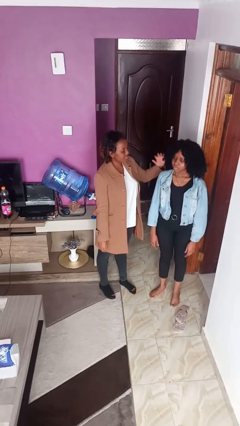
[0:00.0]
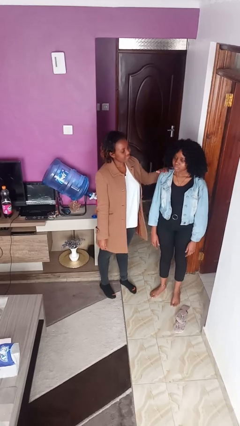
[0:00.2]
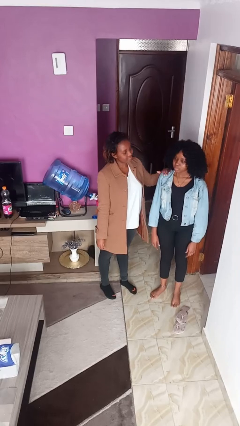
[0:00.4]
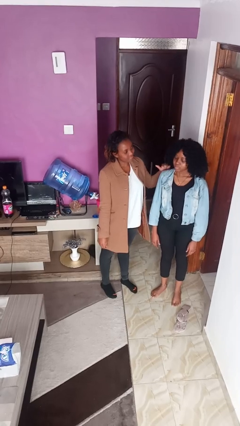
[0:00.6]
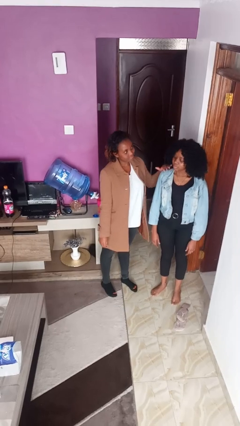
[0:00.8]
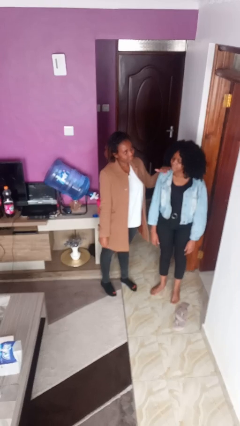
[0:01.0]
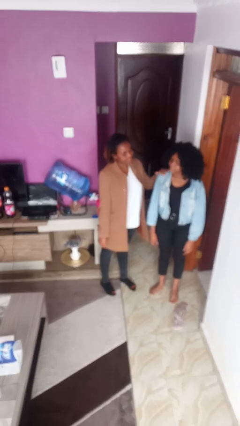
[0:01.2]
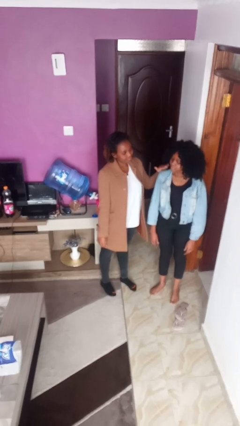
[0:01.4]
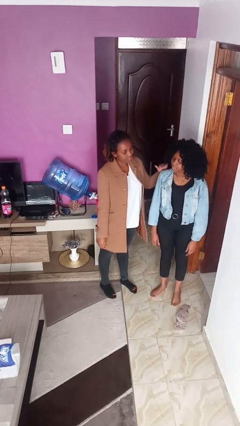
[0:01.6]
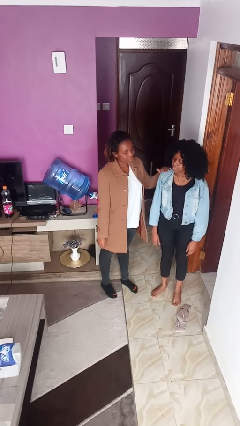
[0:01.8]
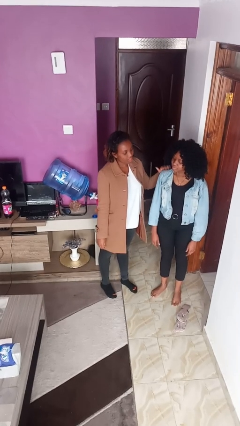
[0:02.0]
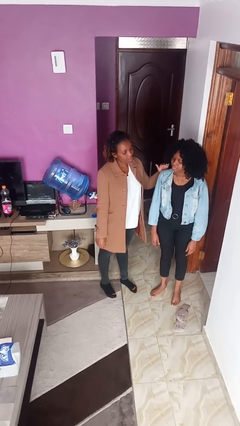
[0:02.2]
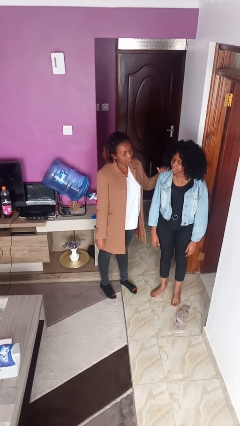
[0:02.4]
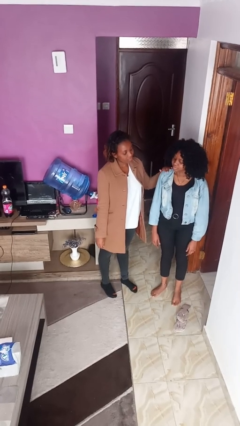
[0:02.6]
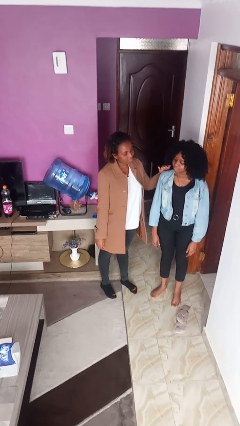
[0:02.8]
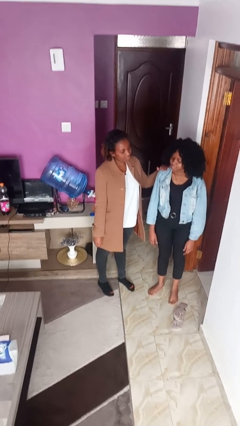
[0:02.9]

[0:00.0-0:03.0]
person pounds shoulders of person

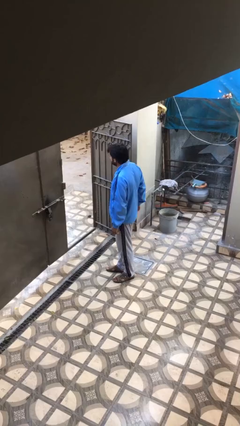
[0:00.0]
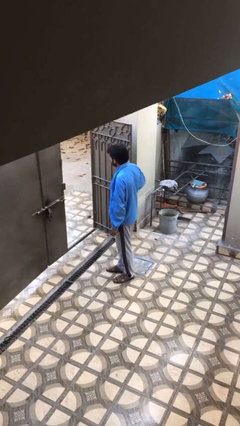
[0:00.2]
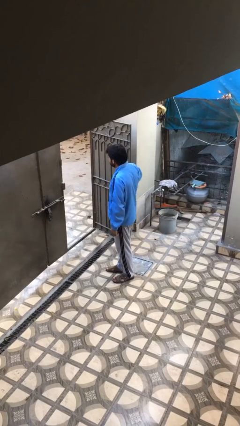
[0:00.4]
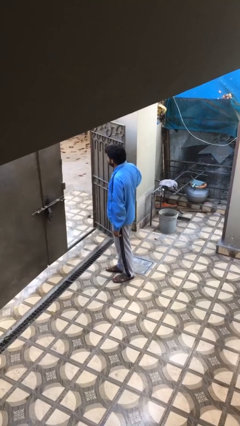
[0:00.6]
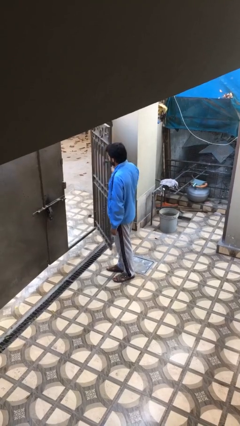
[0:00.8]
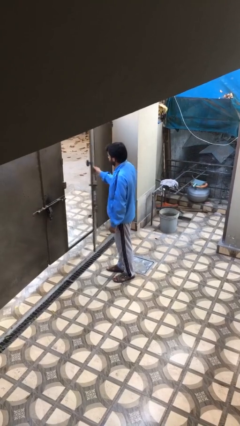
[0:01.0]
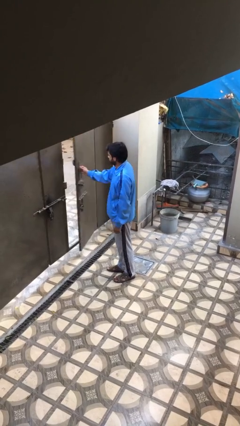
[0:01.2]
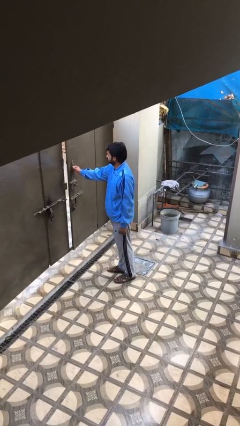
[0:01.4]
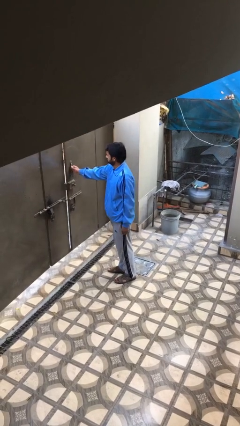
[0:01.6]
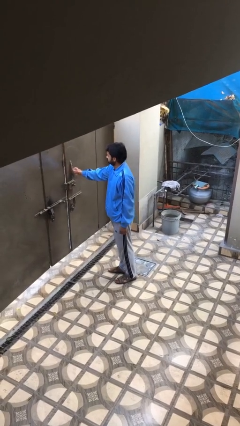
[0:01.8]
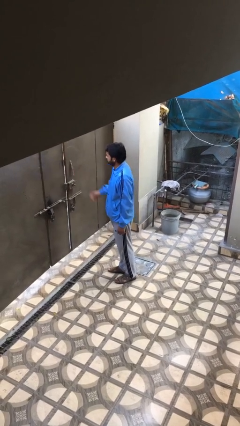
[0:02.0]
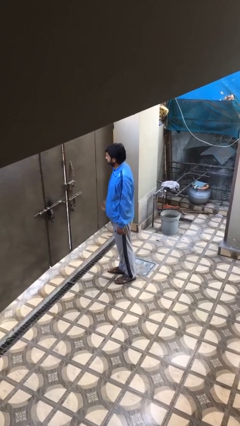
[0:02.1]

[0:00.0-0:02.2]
person closes facility door

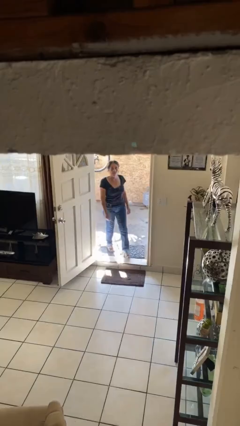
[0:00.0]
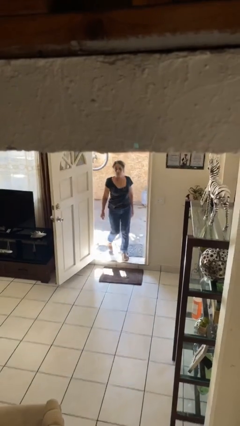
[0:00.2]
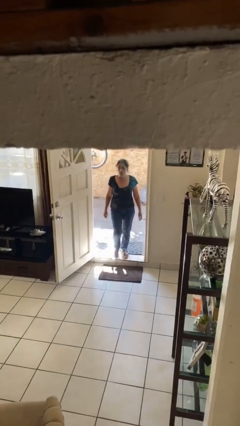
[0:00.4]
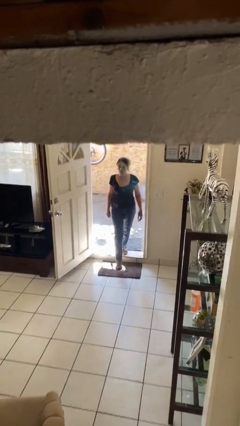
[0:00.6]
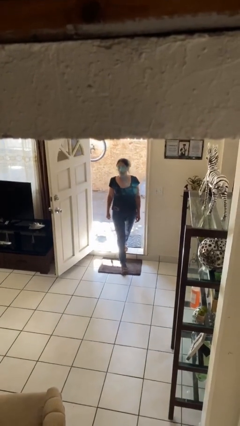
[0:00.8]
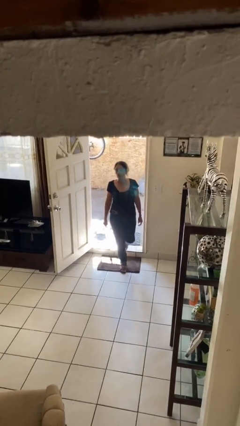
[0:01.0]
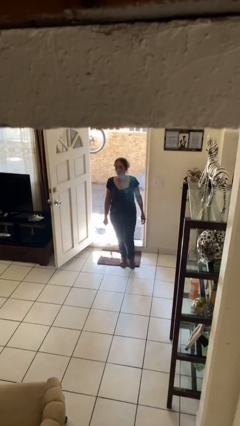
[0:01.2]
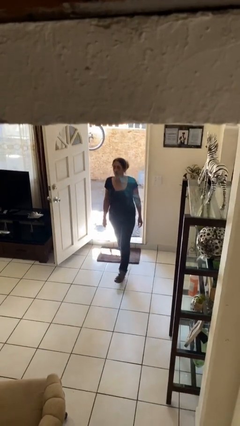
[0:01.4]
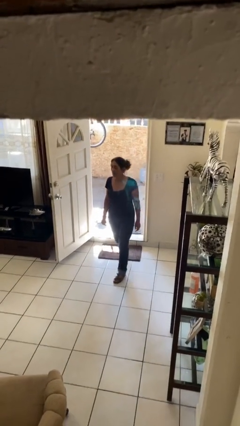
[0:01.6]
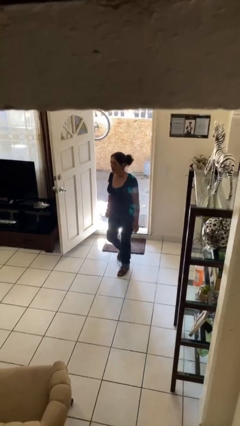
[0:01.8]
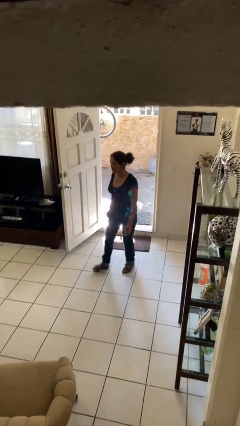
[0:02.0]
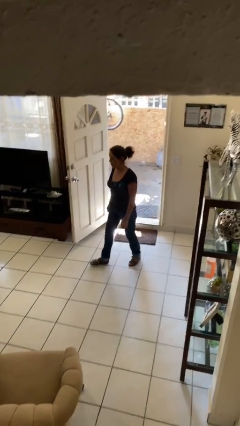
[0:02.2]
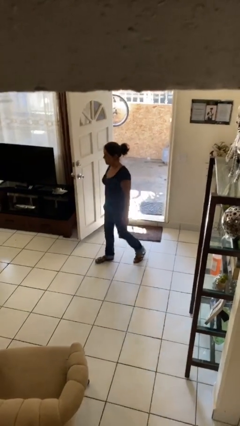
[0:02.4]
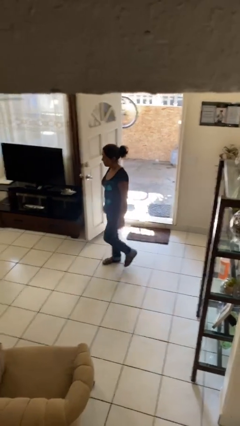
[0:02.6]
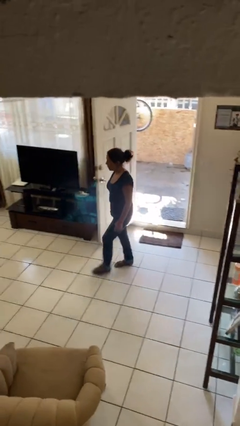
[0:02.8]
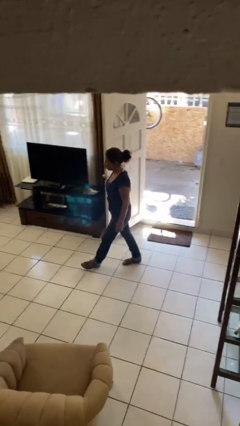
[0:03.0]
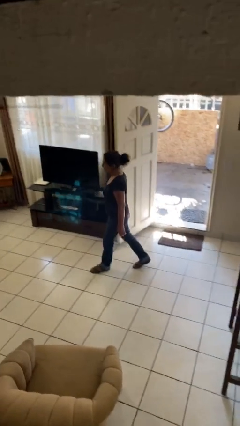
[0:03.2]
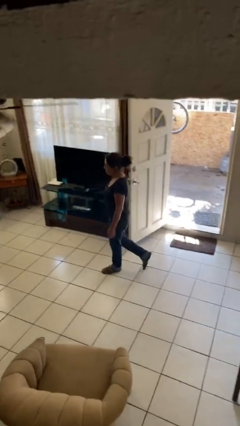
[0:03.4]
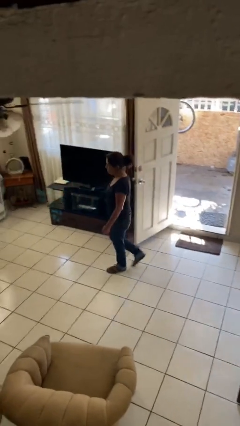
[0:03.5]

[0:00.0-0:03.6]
person enters scene through structure

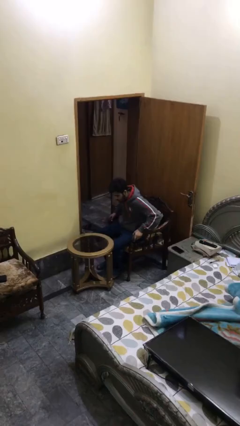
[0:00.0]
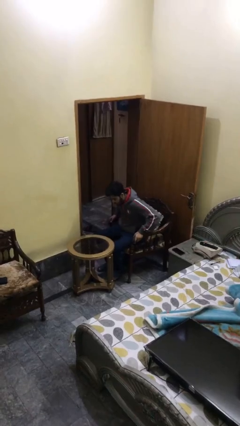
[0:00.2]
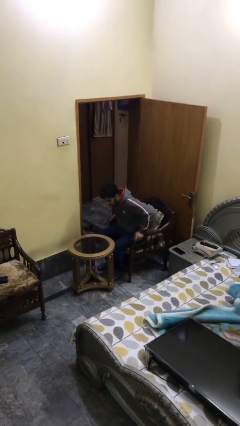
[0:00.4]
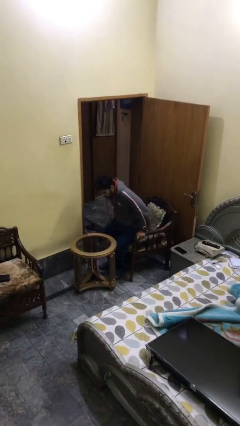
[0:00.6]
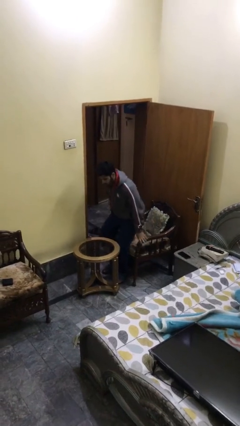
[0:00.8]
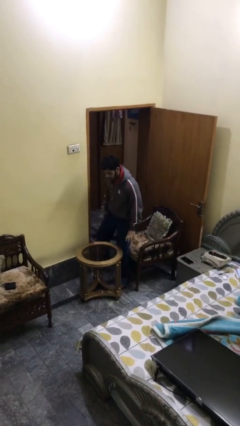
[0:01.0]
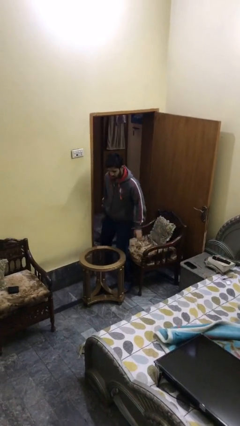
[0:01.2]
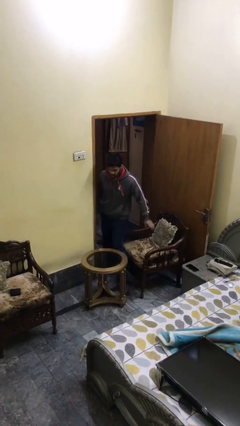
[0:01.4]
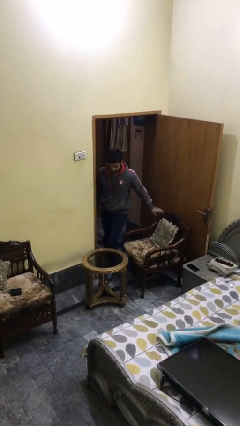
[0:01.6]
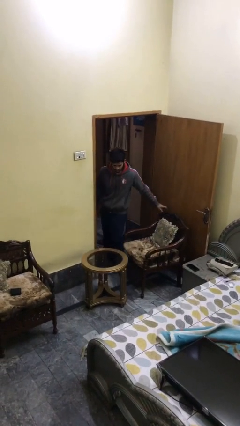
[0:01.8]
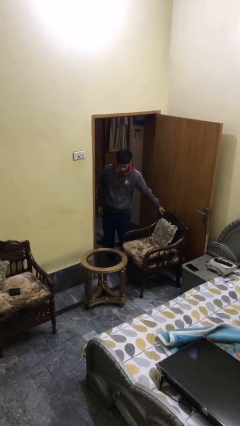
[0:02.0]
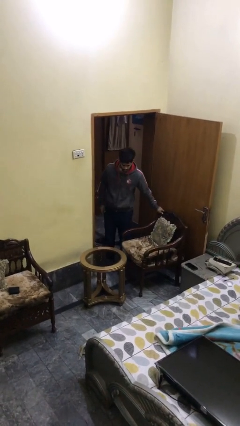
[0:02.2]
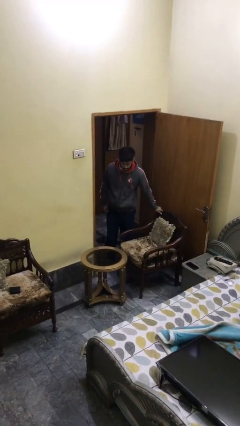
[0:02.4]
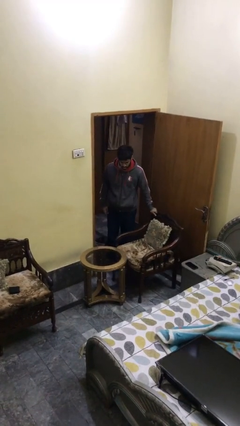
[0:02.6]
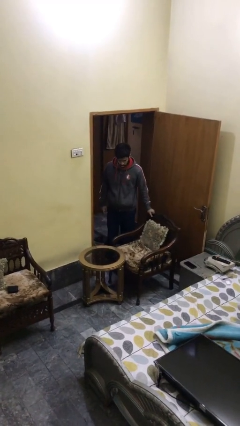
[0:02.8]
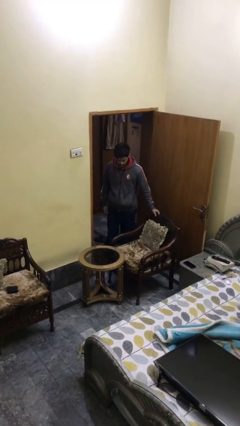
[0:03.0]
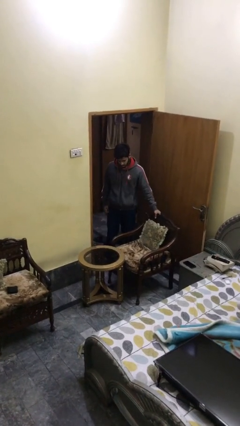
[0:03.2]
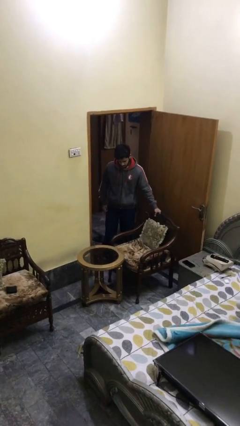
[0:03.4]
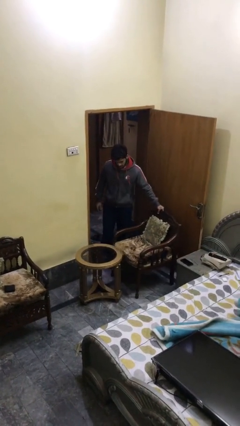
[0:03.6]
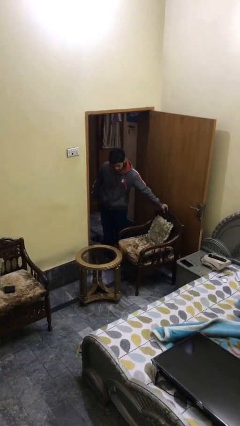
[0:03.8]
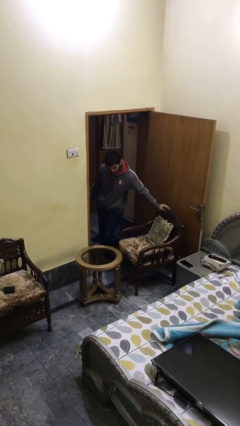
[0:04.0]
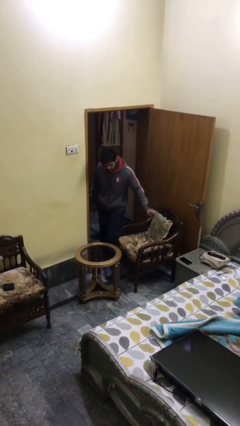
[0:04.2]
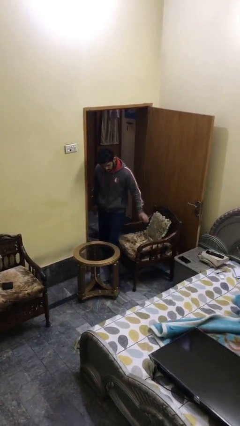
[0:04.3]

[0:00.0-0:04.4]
person stands up

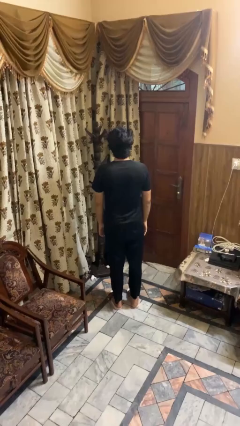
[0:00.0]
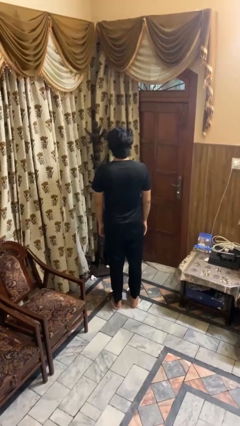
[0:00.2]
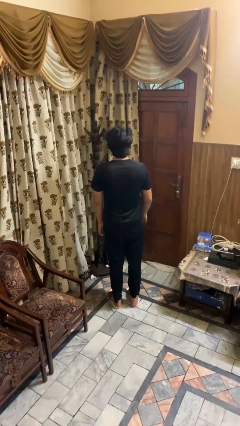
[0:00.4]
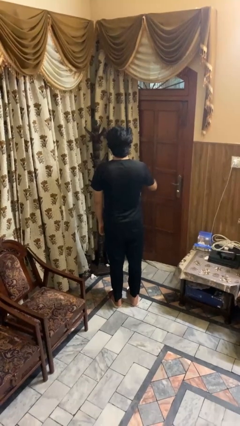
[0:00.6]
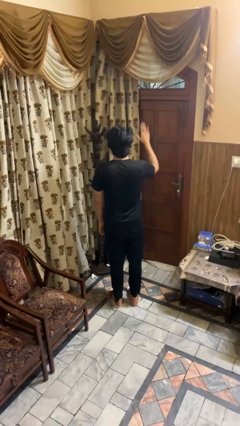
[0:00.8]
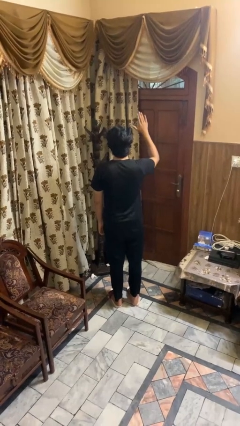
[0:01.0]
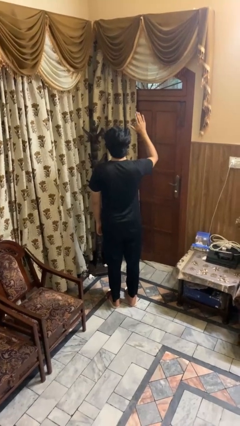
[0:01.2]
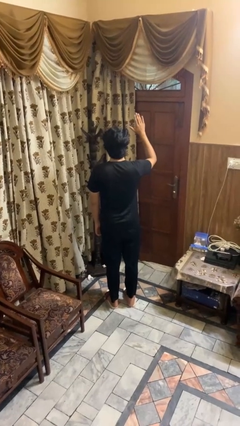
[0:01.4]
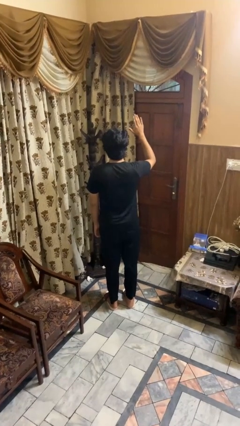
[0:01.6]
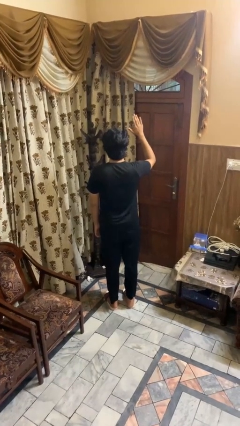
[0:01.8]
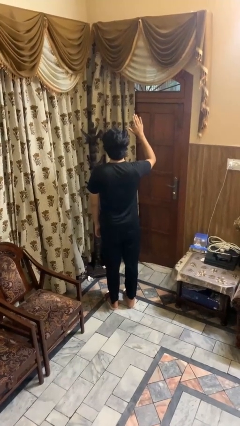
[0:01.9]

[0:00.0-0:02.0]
person gestures raise hand

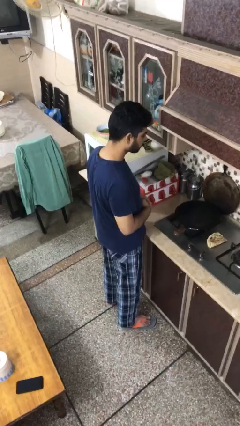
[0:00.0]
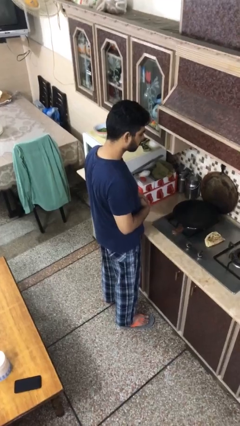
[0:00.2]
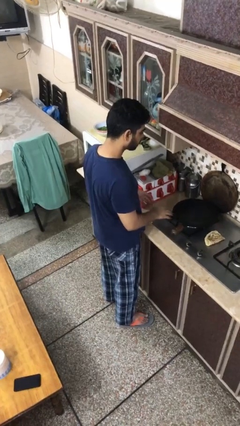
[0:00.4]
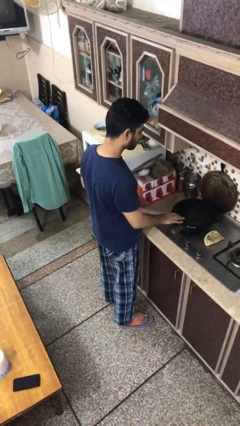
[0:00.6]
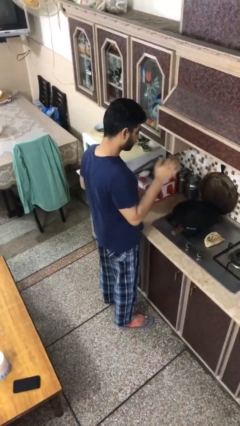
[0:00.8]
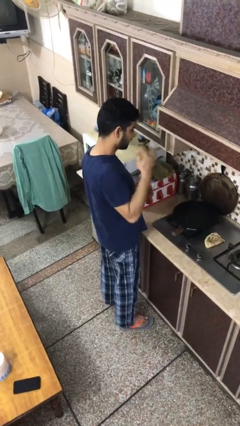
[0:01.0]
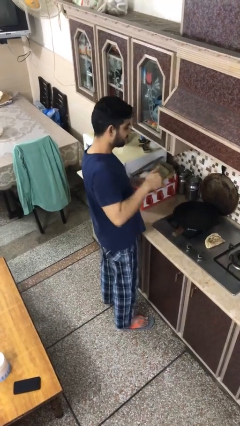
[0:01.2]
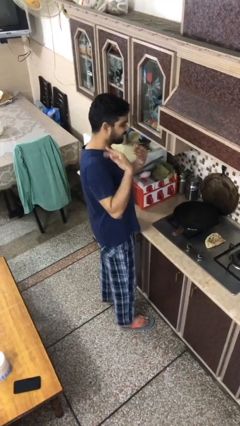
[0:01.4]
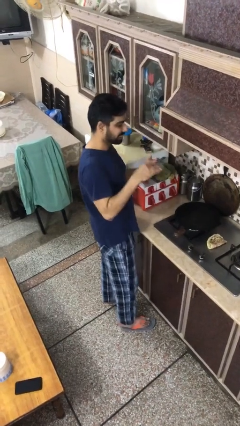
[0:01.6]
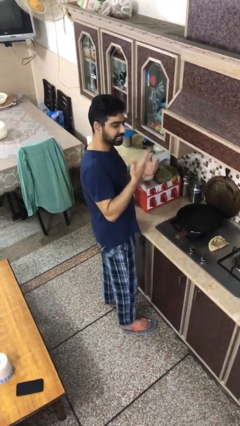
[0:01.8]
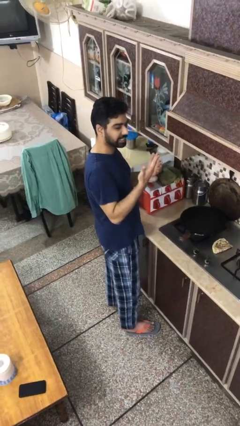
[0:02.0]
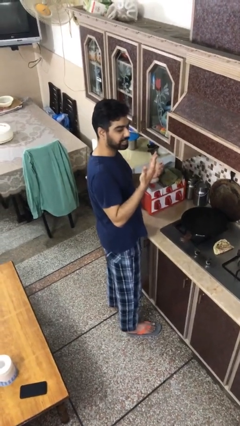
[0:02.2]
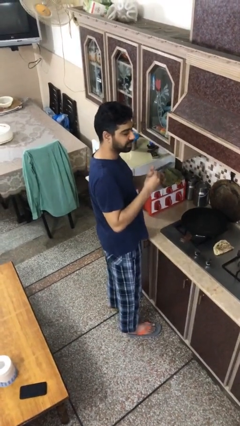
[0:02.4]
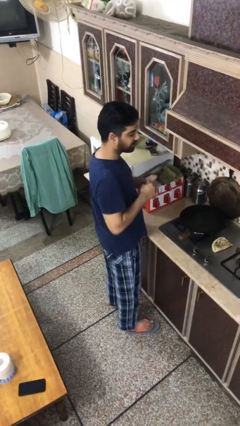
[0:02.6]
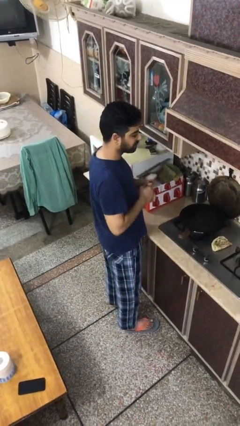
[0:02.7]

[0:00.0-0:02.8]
person burns hand
